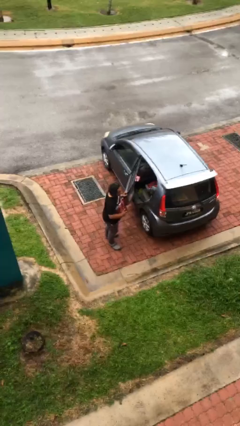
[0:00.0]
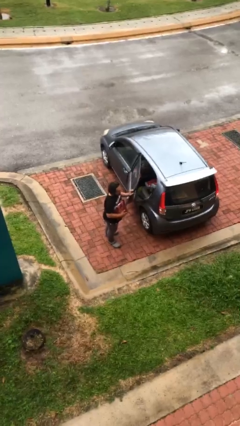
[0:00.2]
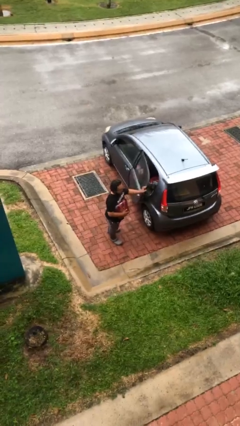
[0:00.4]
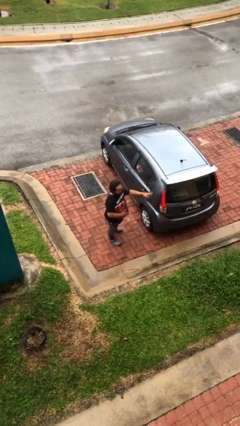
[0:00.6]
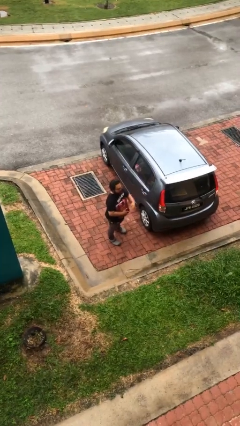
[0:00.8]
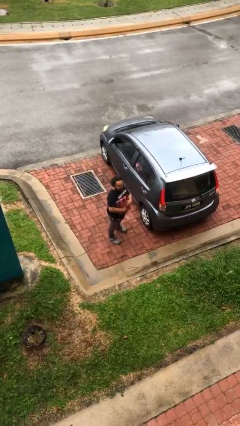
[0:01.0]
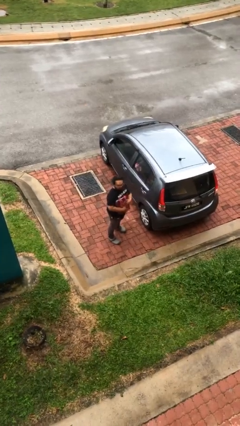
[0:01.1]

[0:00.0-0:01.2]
person closes car door

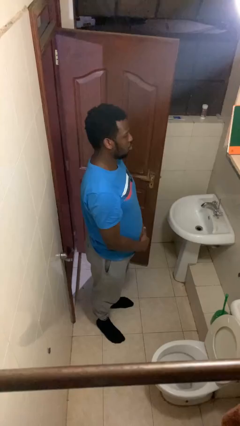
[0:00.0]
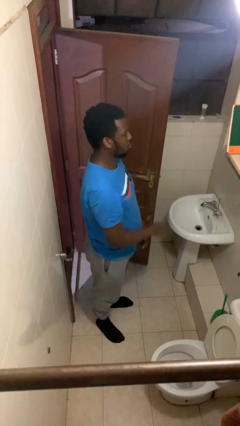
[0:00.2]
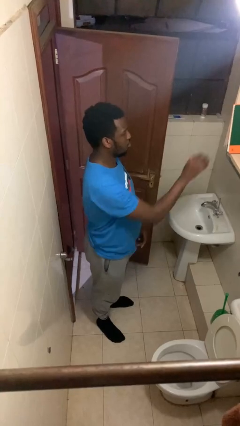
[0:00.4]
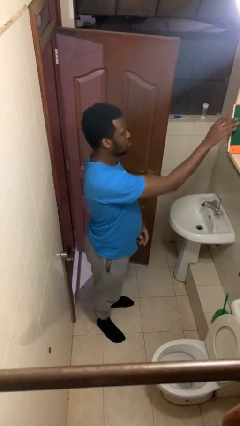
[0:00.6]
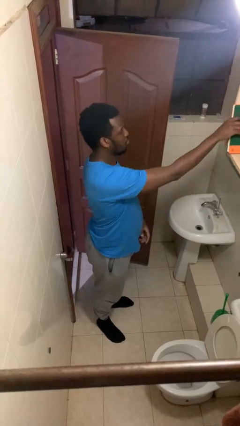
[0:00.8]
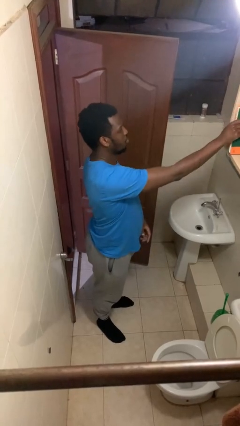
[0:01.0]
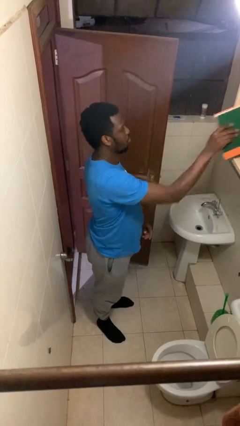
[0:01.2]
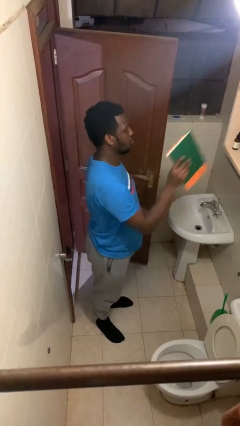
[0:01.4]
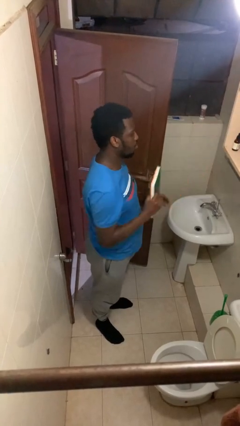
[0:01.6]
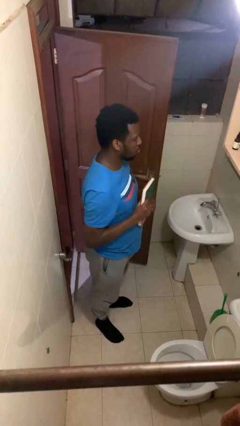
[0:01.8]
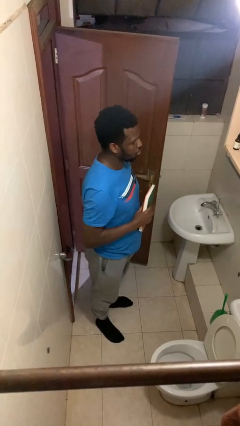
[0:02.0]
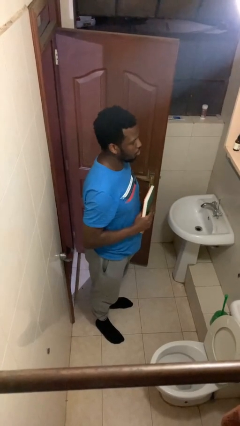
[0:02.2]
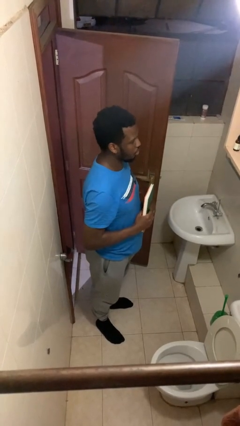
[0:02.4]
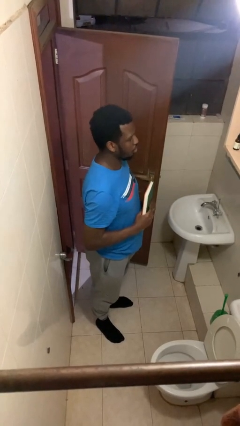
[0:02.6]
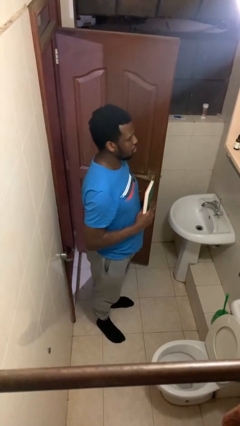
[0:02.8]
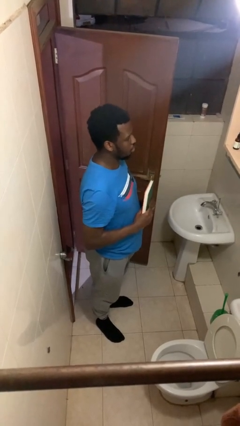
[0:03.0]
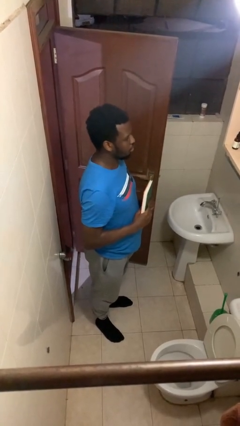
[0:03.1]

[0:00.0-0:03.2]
person picks up object from cabinet

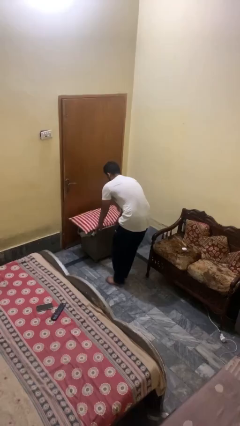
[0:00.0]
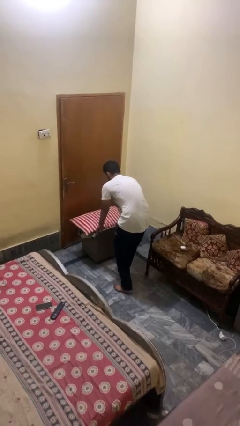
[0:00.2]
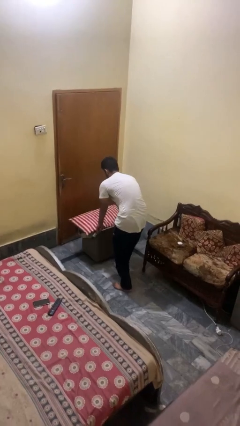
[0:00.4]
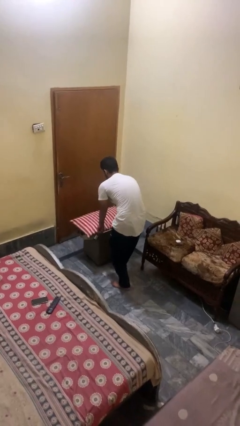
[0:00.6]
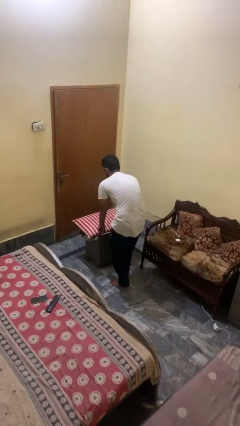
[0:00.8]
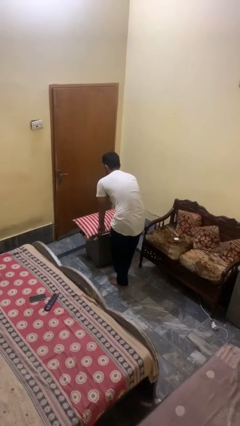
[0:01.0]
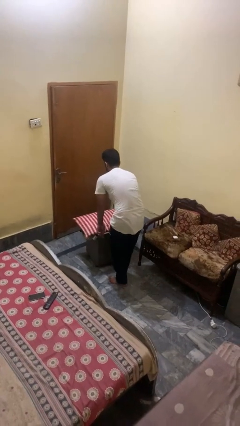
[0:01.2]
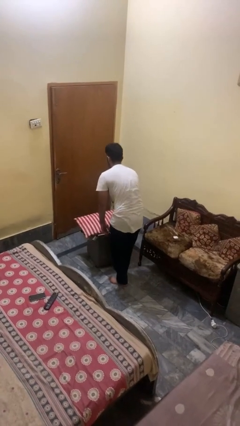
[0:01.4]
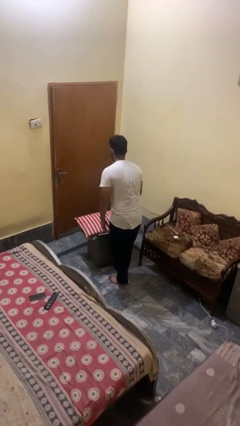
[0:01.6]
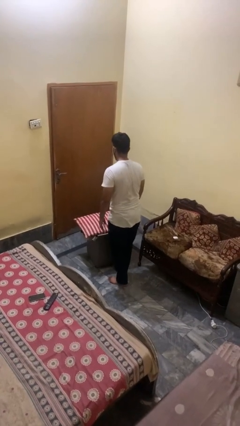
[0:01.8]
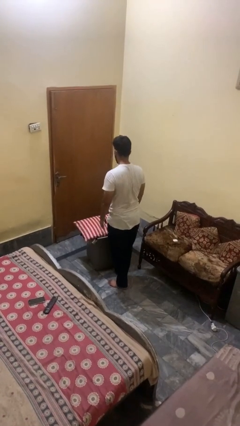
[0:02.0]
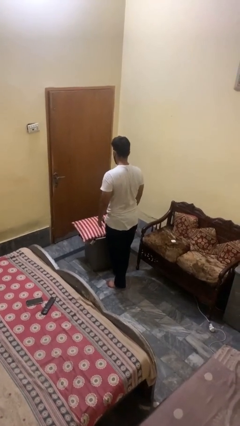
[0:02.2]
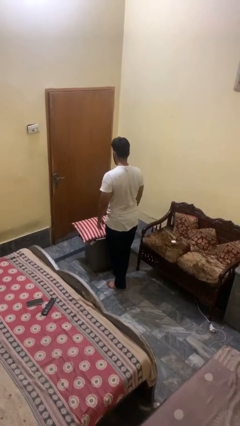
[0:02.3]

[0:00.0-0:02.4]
person pulls wheeled cart

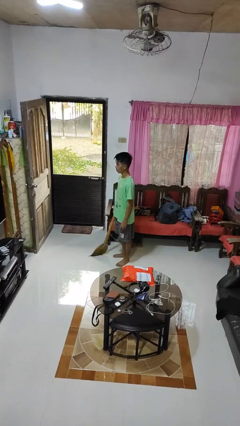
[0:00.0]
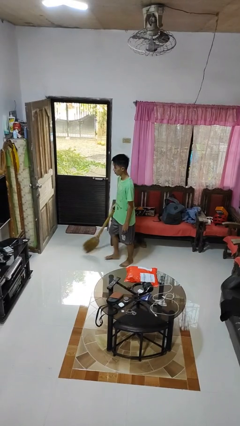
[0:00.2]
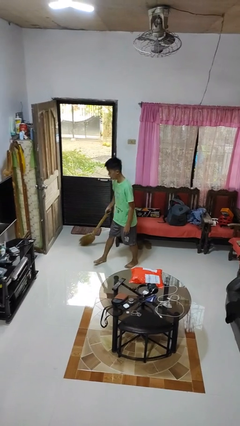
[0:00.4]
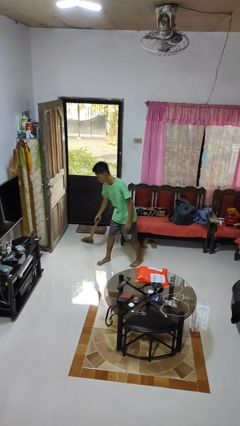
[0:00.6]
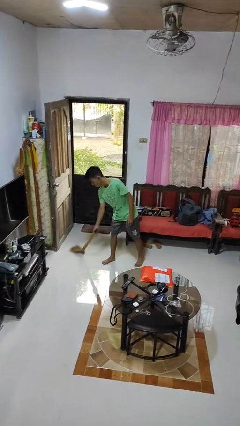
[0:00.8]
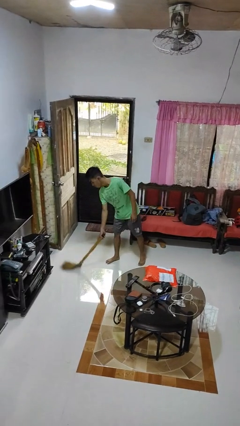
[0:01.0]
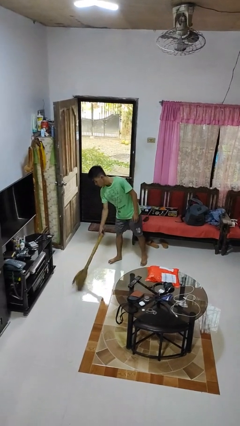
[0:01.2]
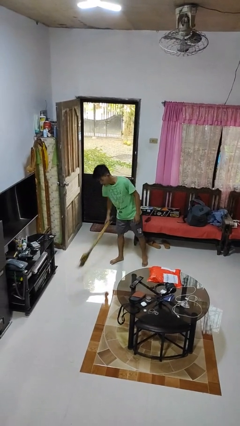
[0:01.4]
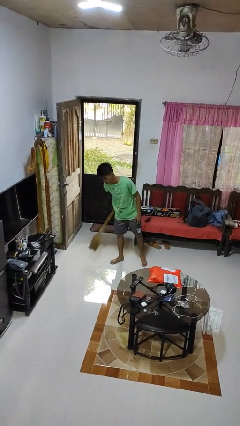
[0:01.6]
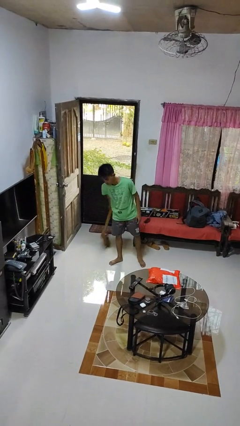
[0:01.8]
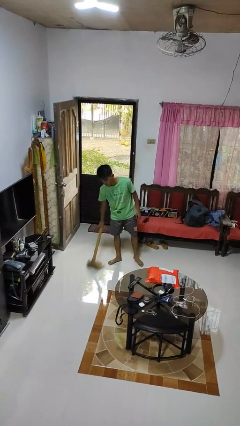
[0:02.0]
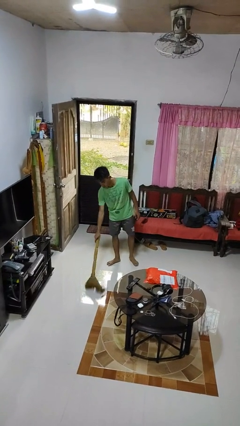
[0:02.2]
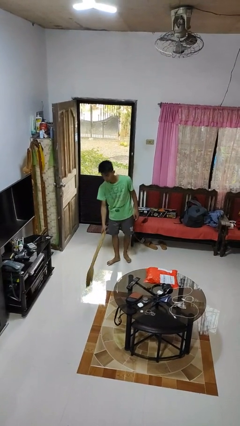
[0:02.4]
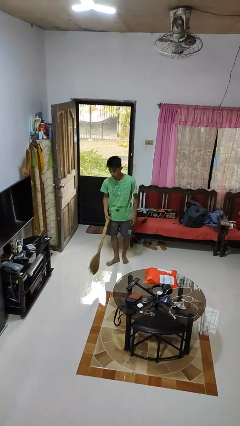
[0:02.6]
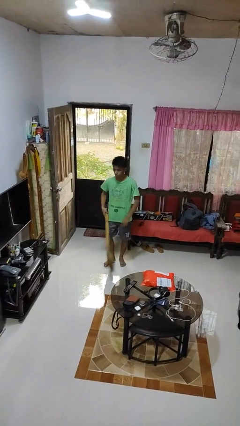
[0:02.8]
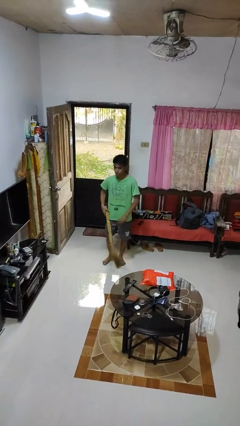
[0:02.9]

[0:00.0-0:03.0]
person sweeps floor

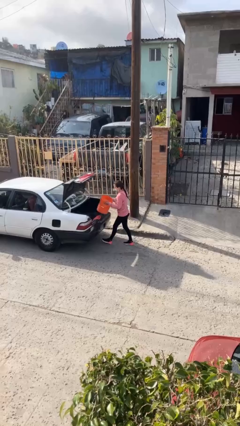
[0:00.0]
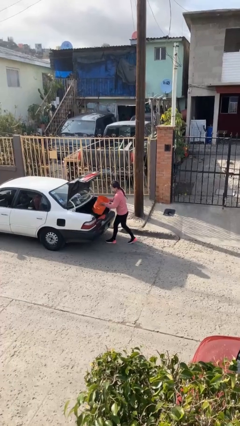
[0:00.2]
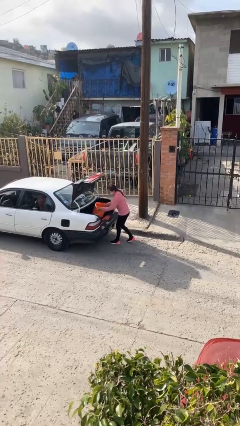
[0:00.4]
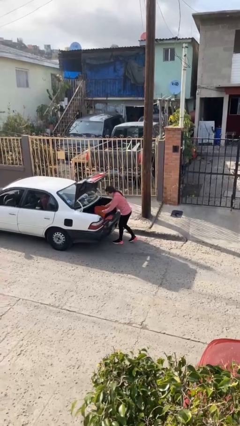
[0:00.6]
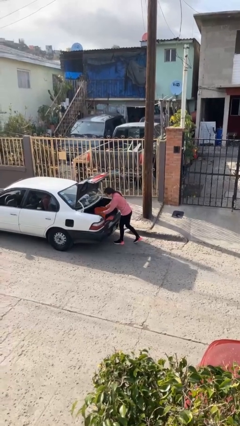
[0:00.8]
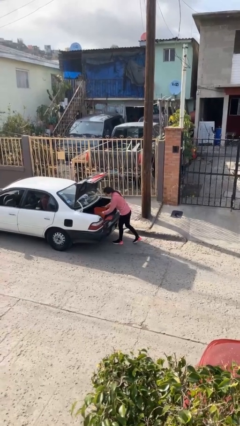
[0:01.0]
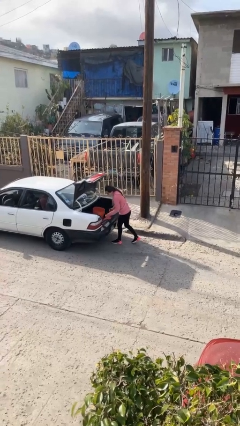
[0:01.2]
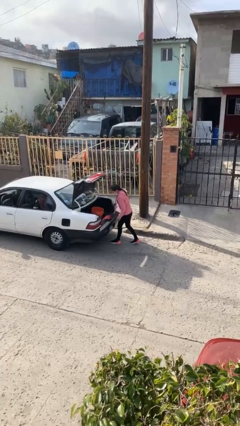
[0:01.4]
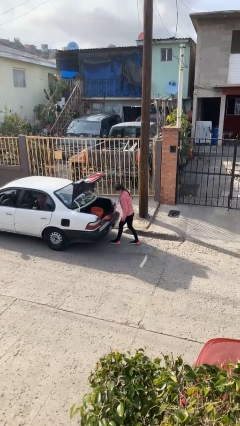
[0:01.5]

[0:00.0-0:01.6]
person loads car

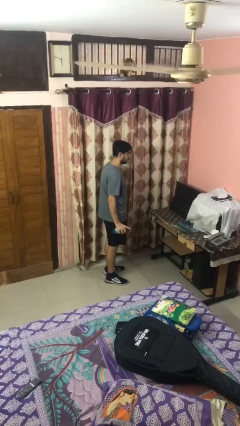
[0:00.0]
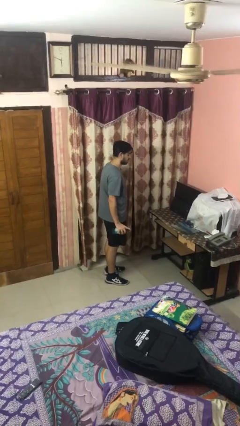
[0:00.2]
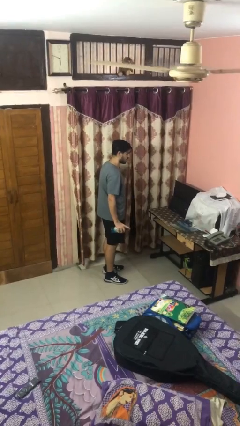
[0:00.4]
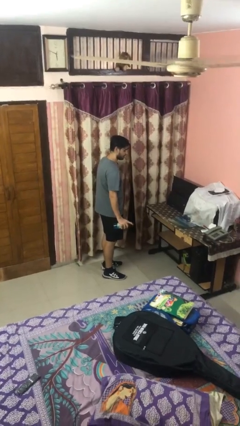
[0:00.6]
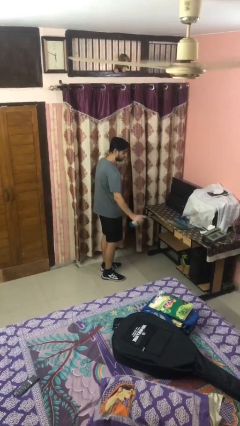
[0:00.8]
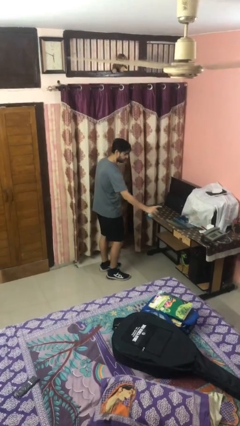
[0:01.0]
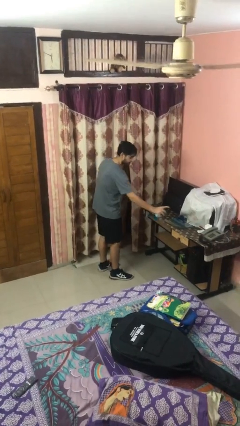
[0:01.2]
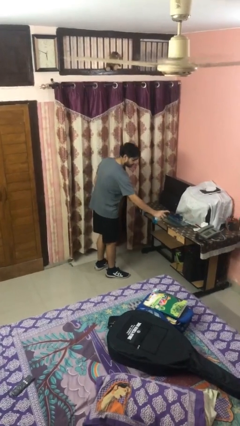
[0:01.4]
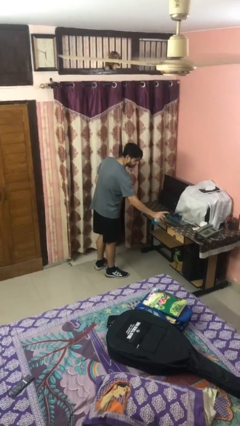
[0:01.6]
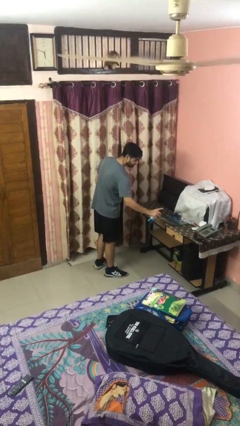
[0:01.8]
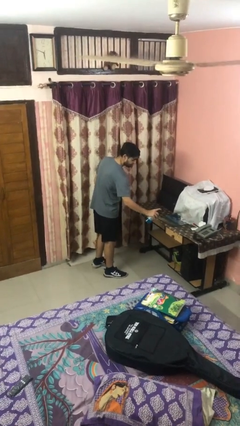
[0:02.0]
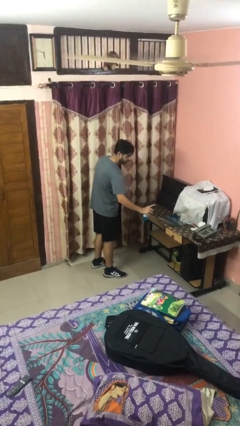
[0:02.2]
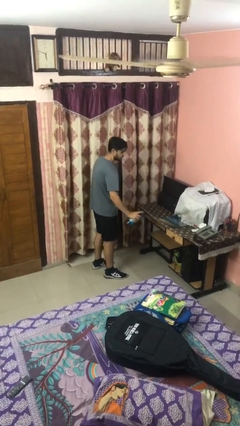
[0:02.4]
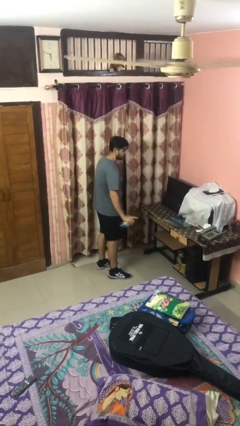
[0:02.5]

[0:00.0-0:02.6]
person sprays from bottle

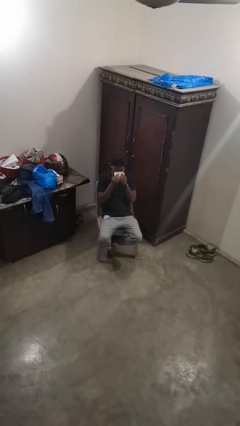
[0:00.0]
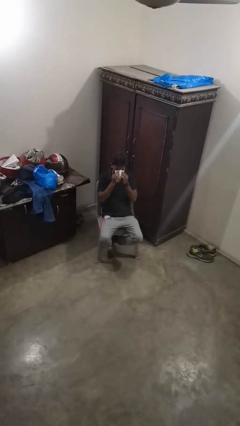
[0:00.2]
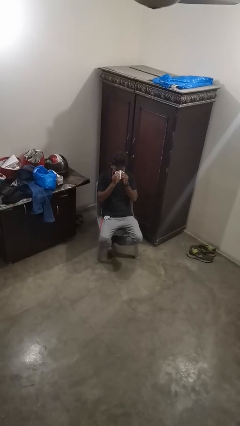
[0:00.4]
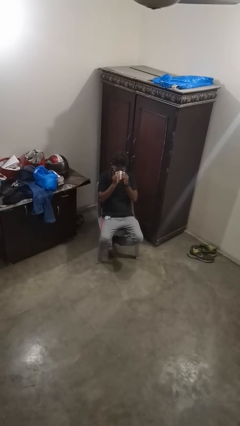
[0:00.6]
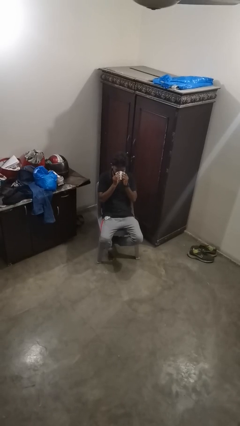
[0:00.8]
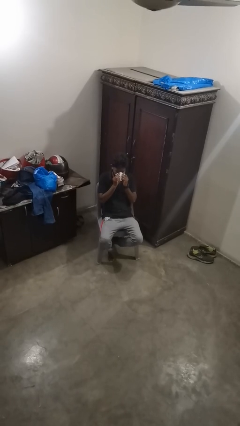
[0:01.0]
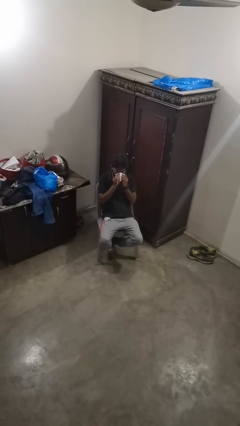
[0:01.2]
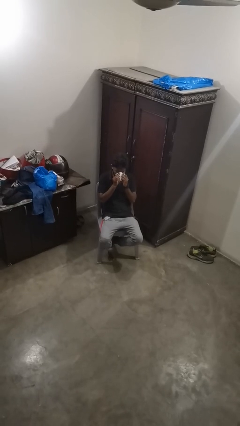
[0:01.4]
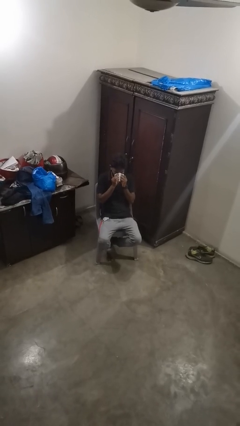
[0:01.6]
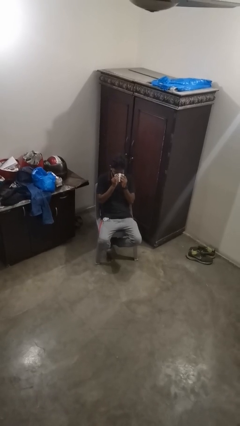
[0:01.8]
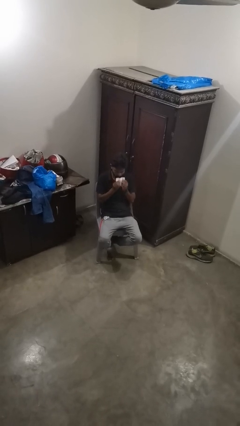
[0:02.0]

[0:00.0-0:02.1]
person blows nose

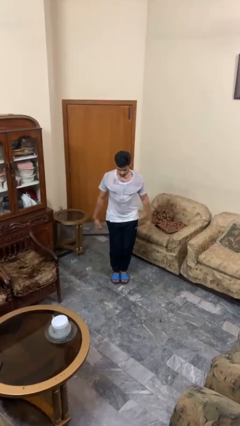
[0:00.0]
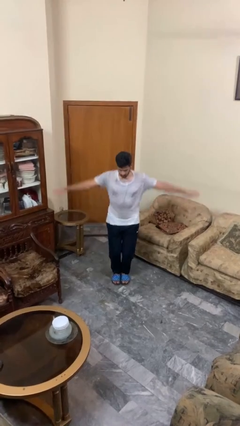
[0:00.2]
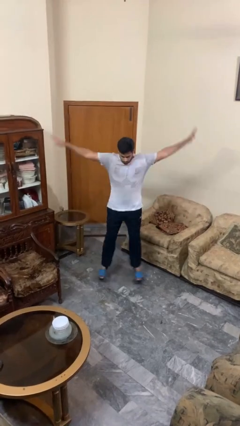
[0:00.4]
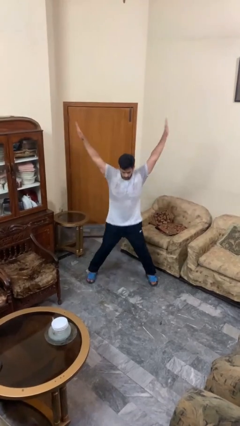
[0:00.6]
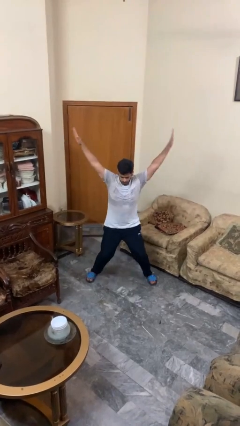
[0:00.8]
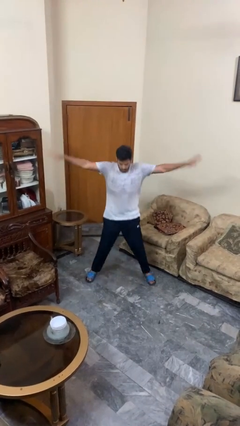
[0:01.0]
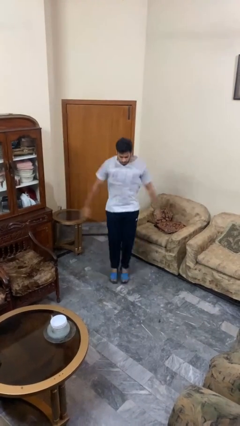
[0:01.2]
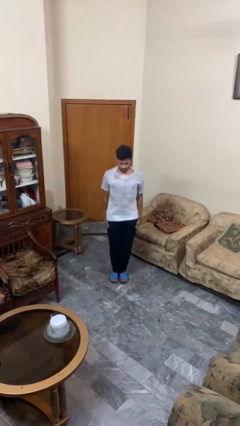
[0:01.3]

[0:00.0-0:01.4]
person exercises with jumping jacks
